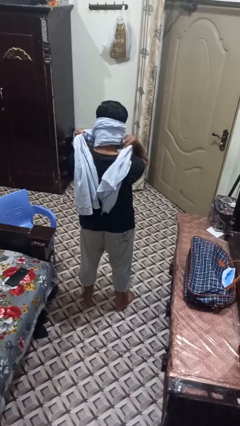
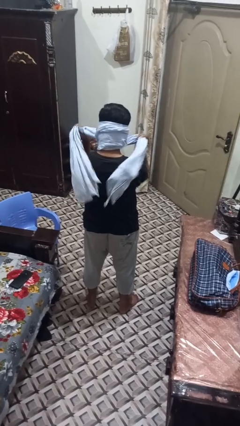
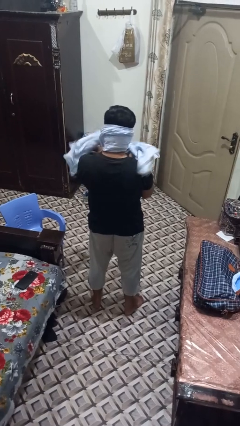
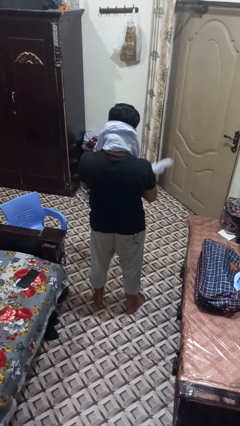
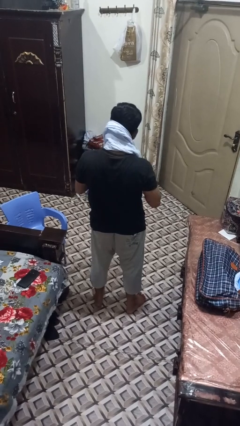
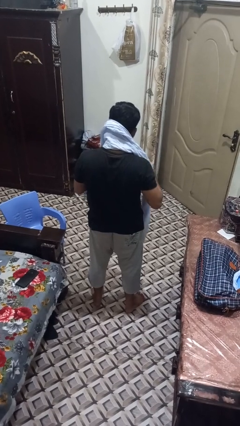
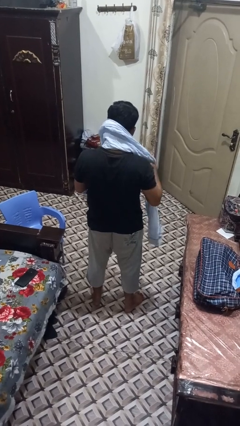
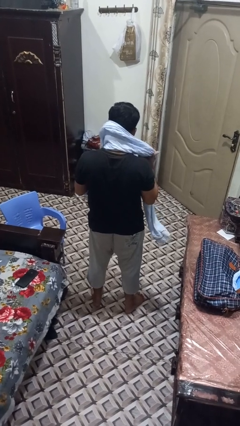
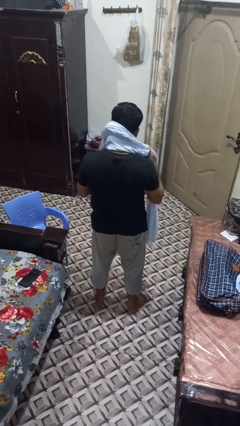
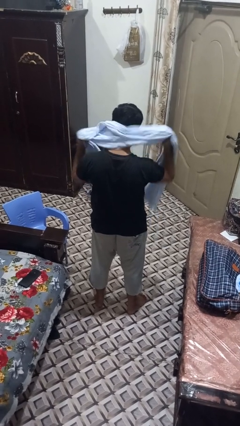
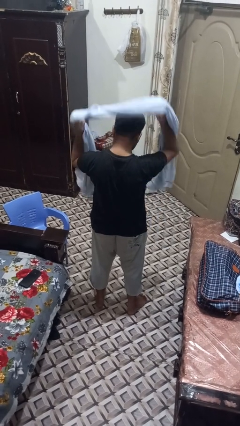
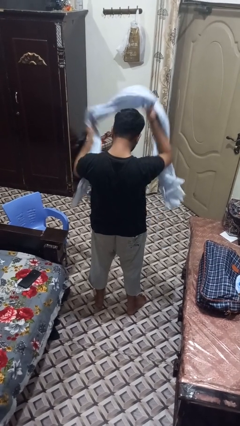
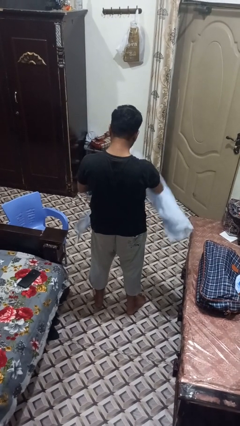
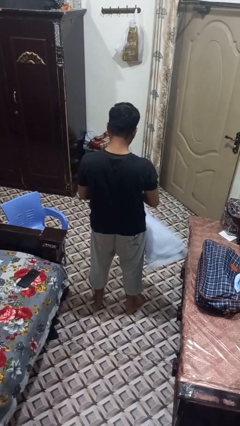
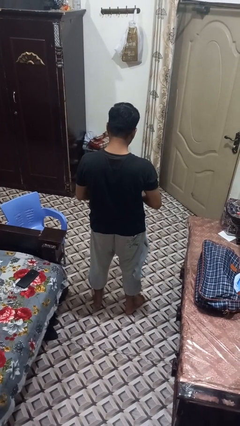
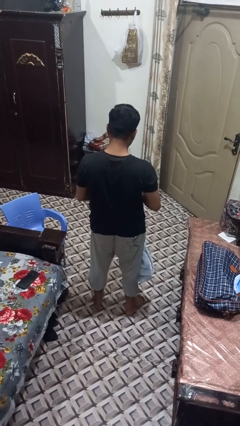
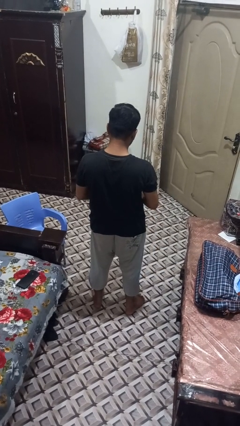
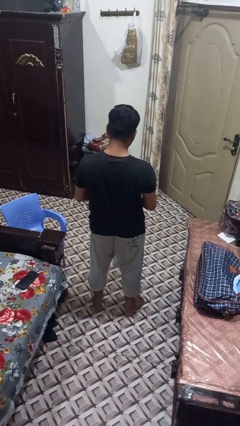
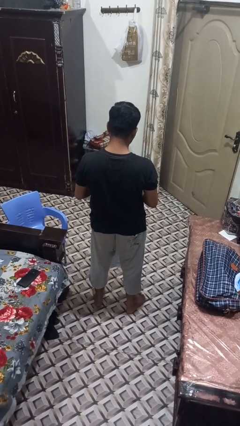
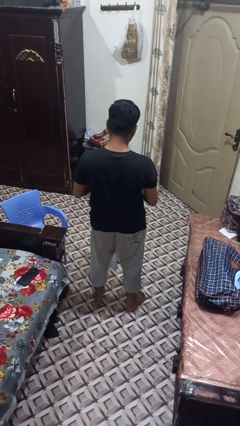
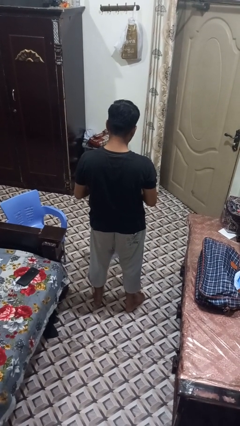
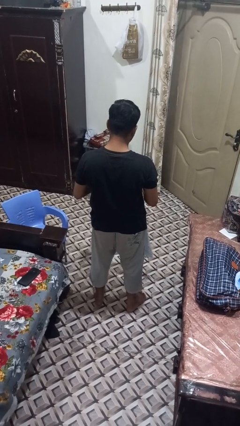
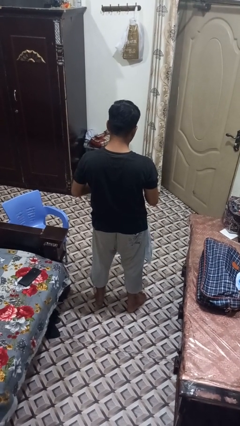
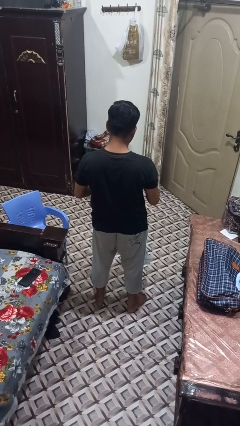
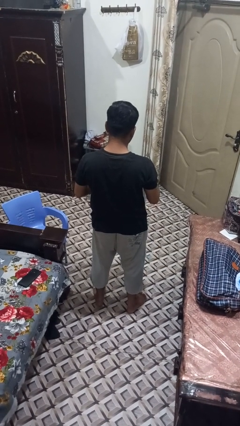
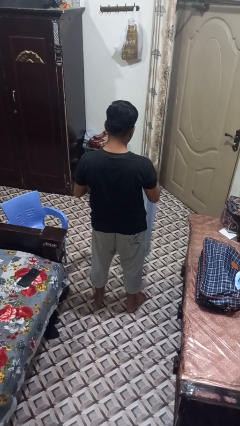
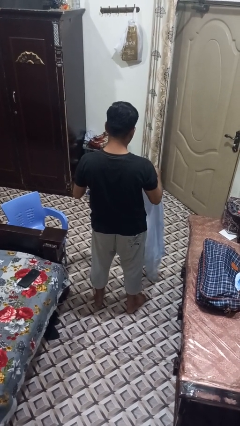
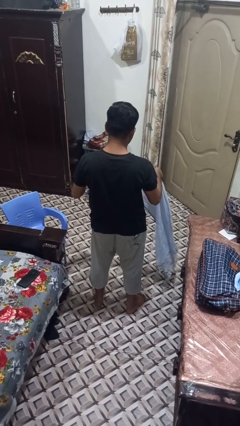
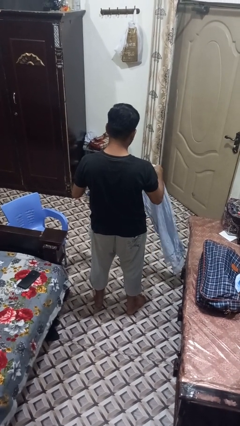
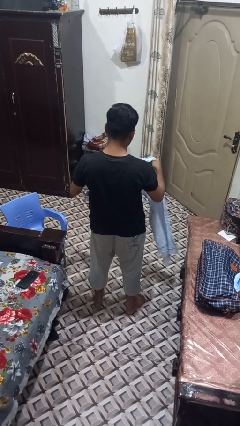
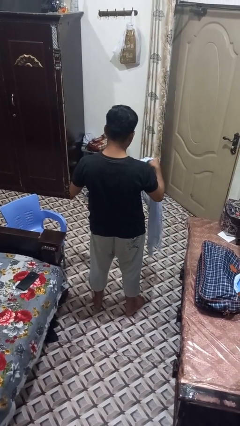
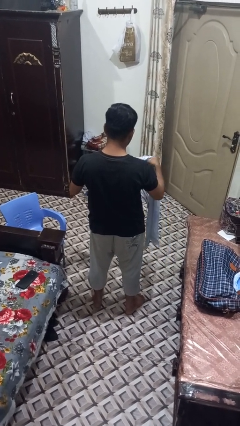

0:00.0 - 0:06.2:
person takes off scarf

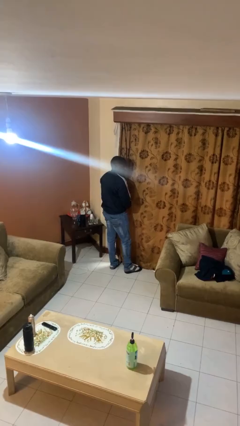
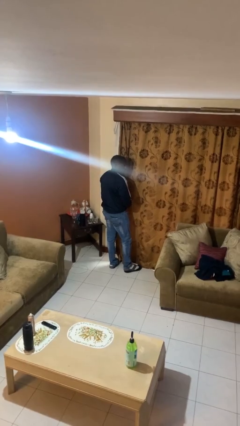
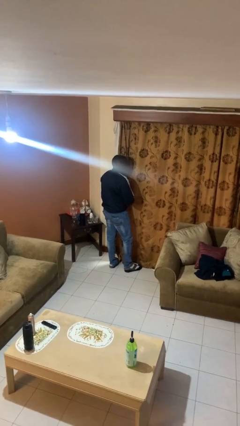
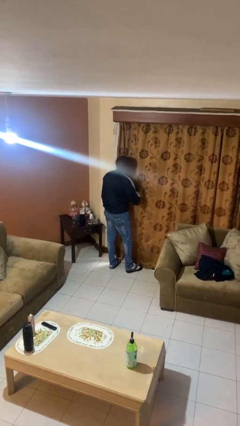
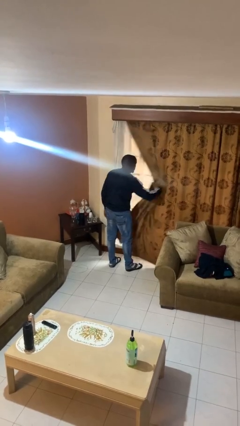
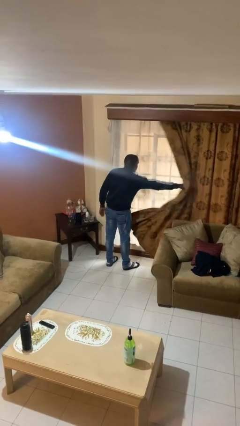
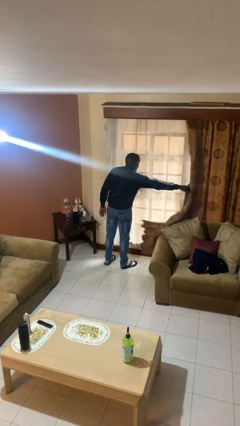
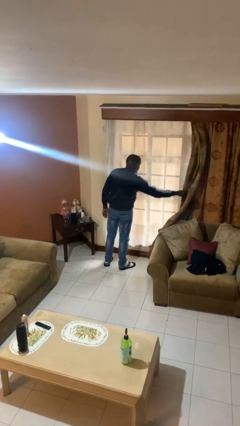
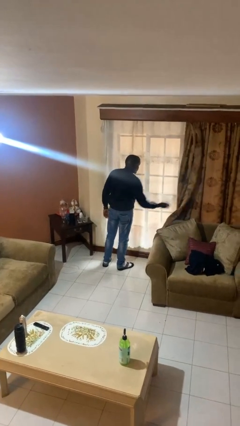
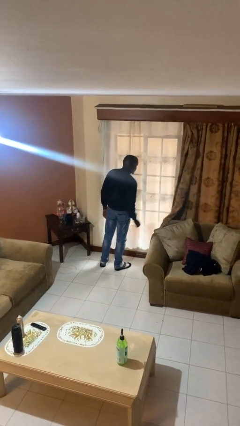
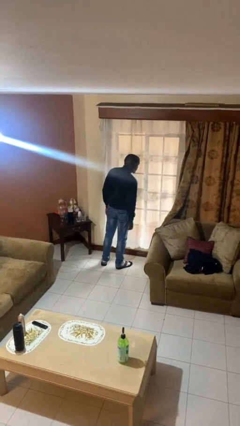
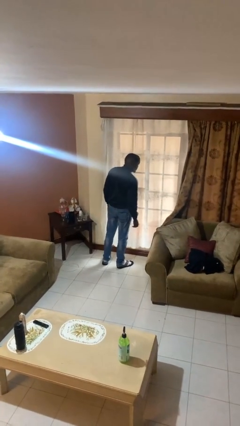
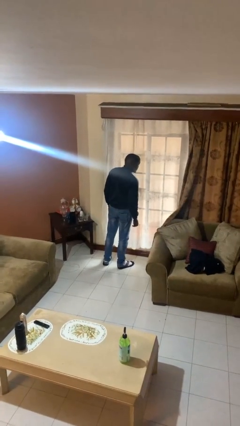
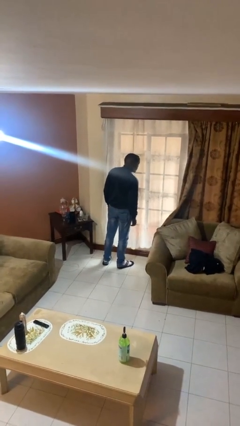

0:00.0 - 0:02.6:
person opens curtains

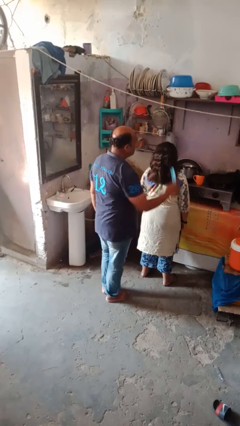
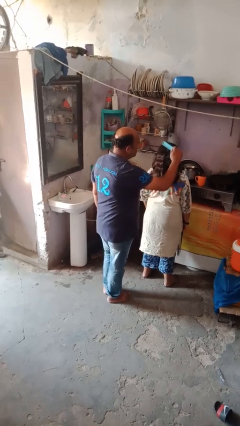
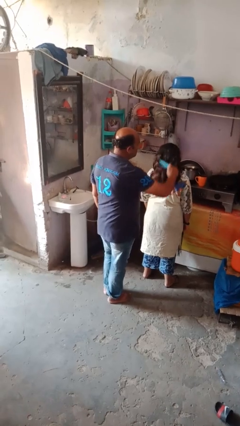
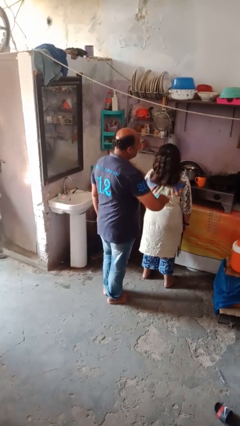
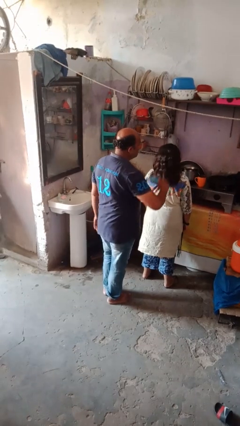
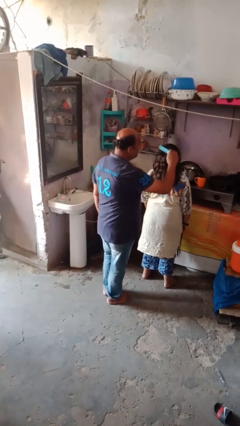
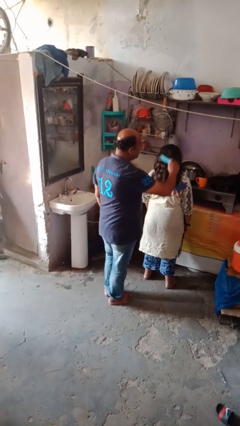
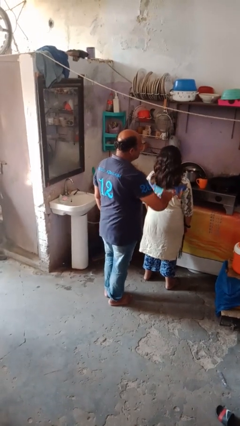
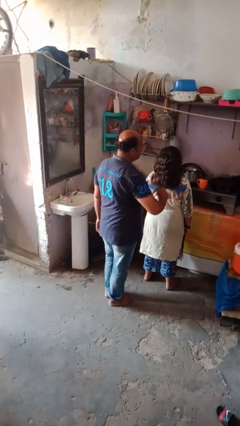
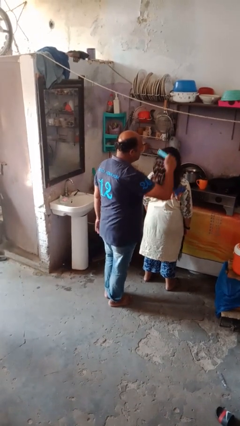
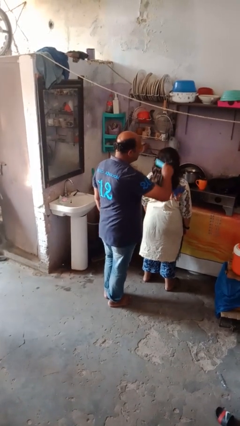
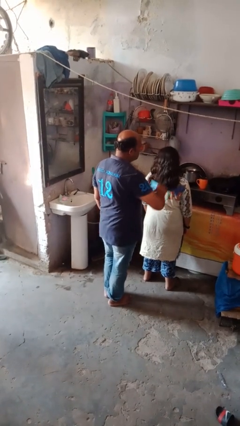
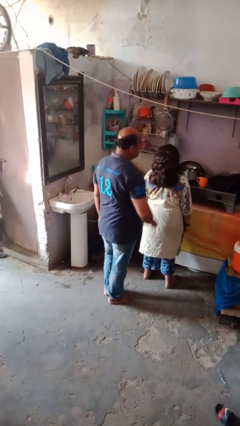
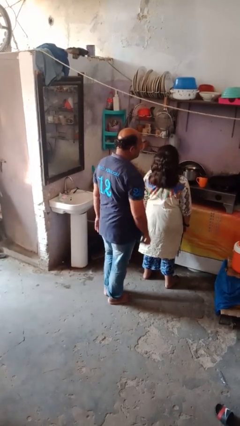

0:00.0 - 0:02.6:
person brushes hair of person

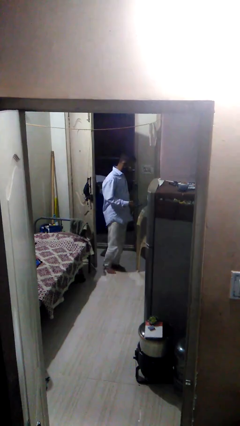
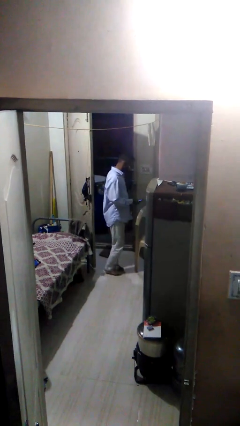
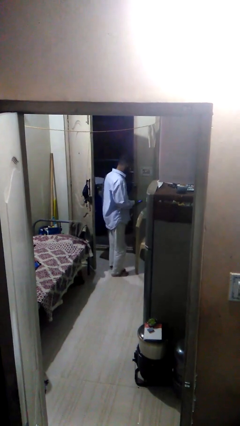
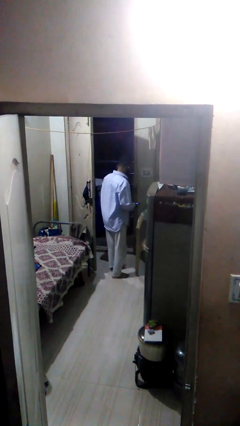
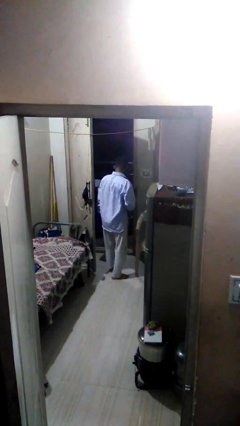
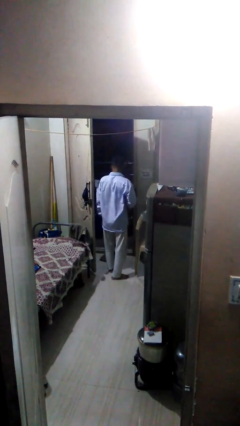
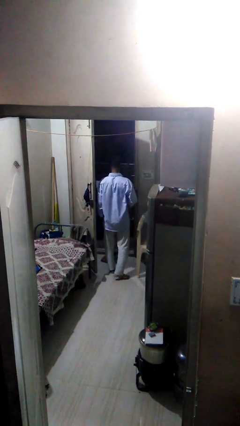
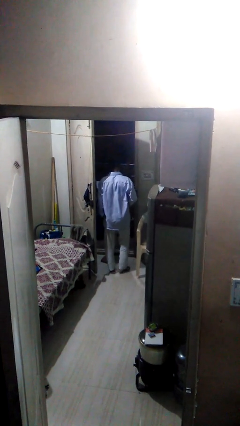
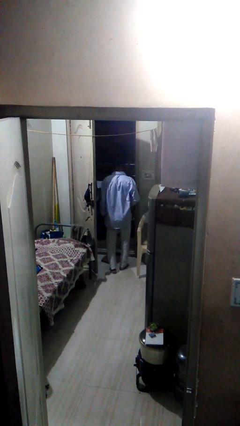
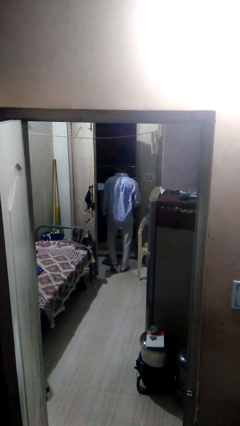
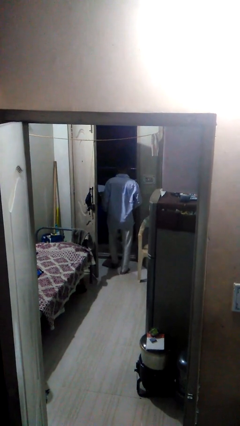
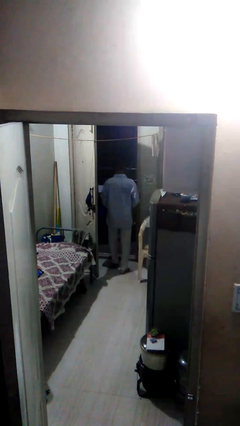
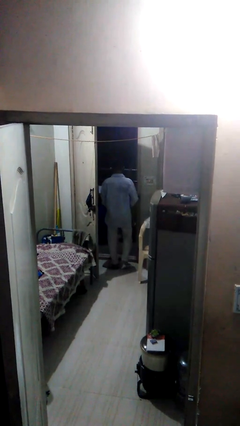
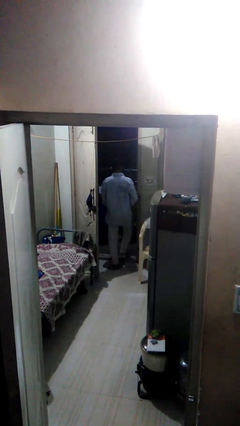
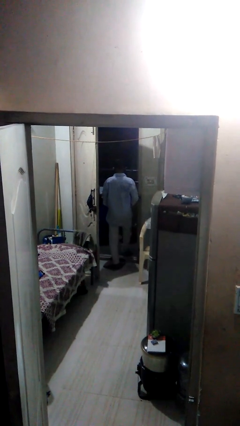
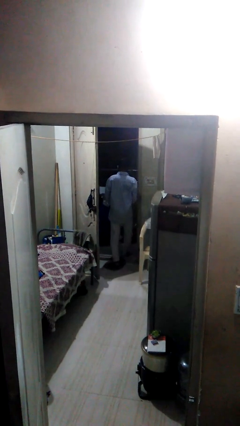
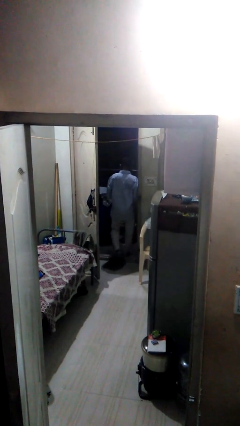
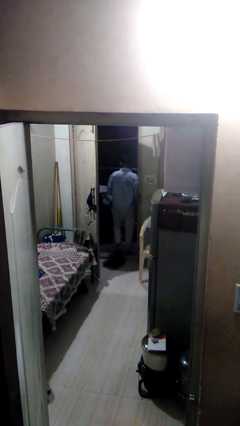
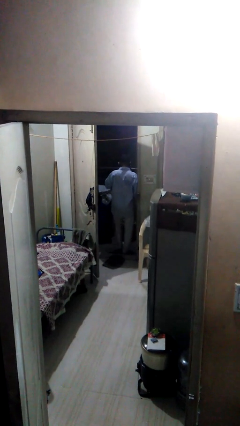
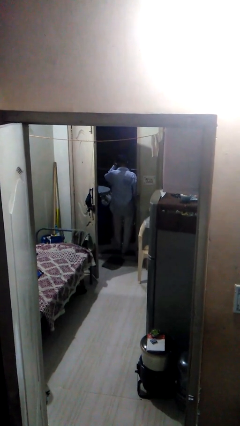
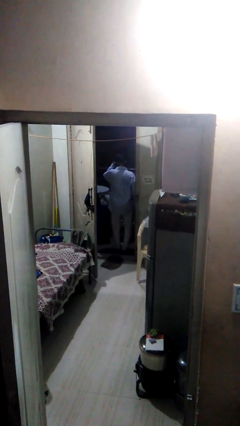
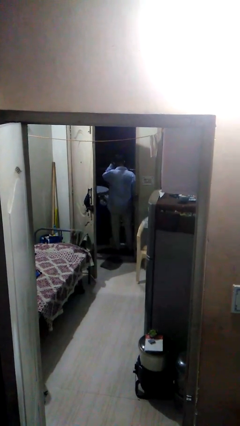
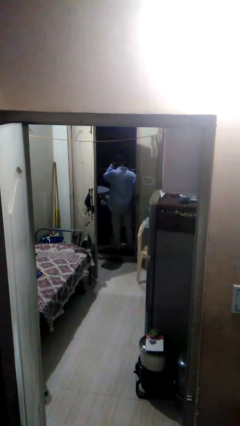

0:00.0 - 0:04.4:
person exits scene through structure

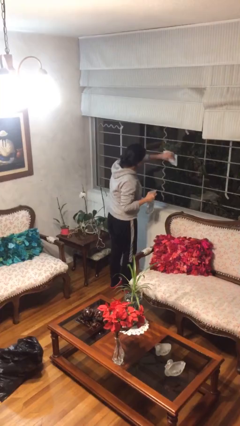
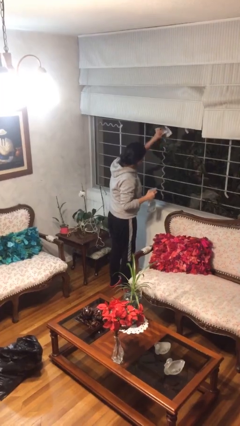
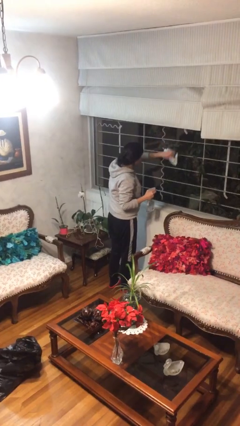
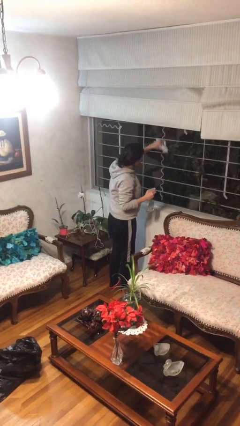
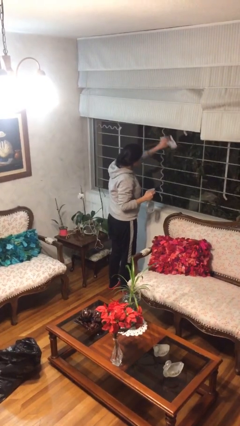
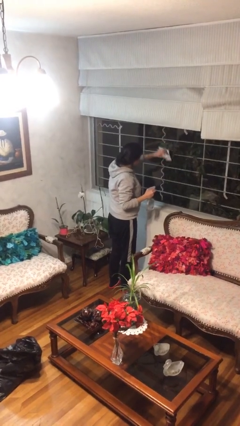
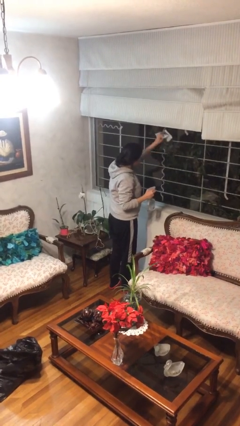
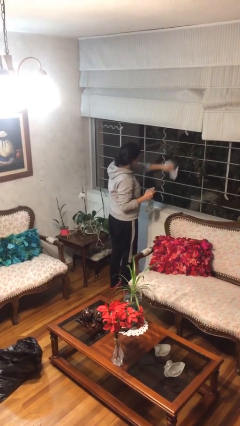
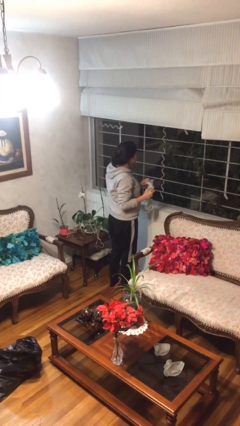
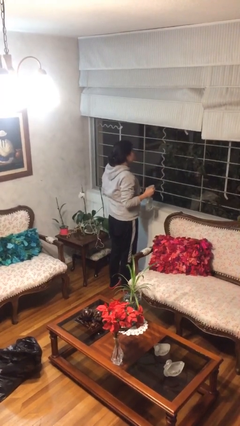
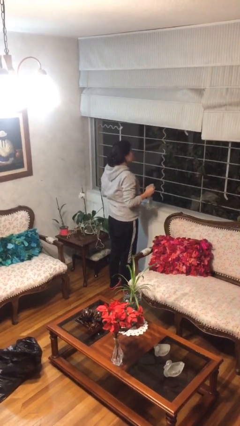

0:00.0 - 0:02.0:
person washes window

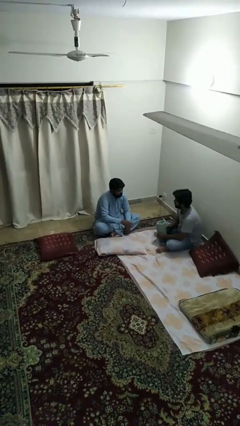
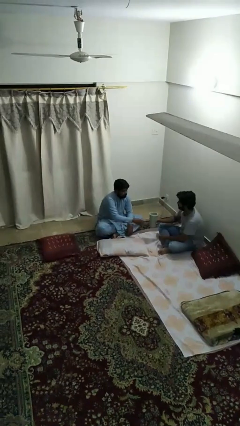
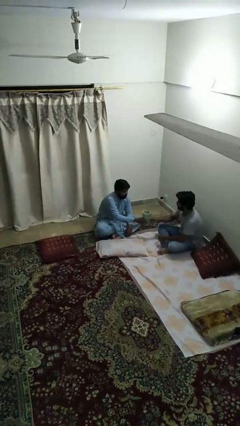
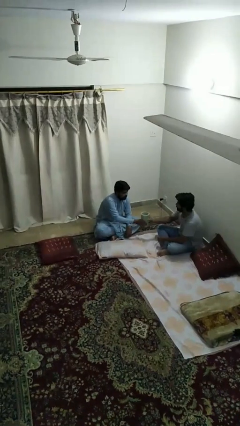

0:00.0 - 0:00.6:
person transfers object to person
